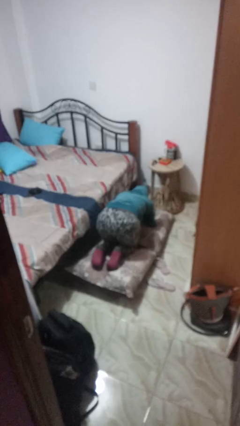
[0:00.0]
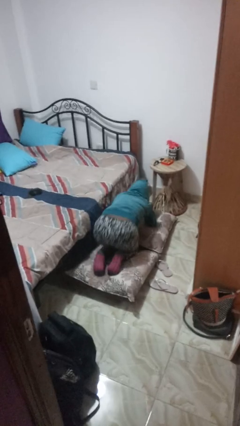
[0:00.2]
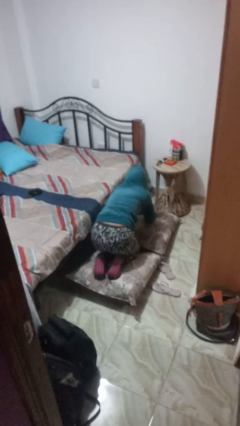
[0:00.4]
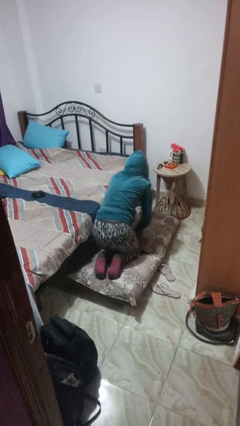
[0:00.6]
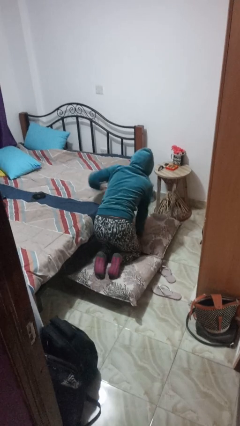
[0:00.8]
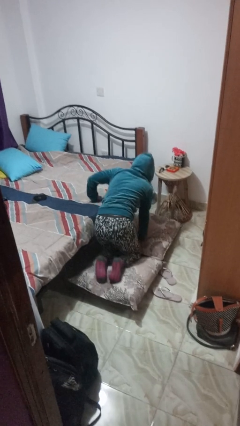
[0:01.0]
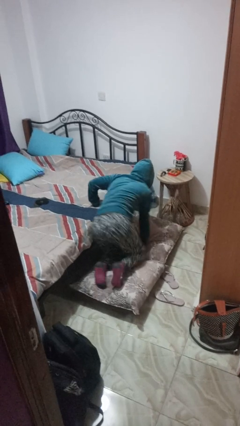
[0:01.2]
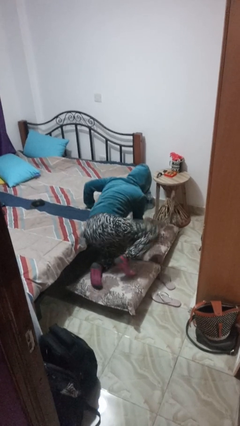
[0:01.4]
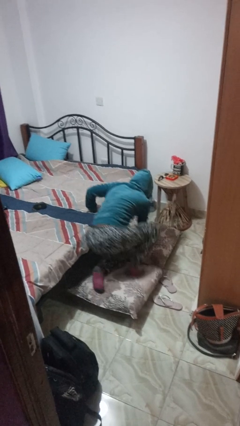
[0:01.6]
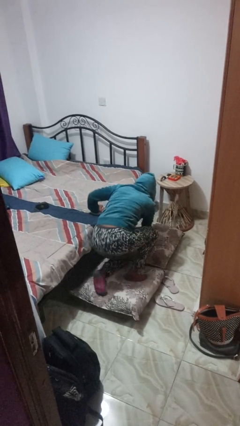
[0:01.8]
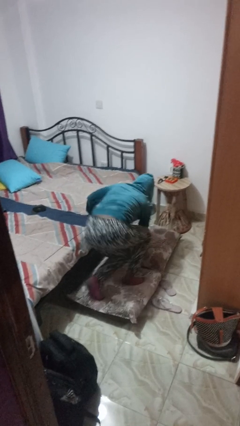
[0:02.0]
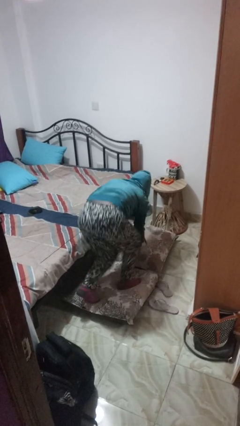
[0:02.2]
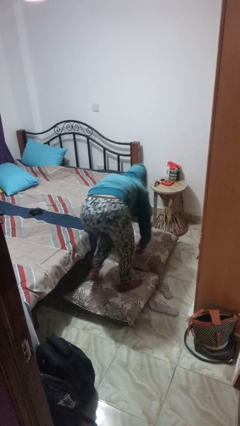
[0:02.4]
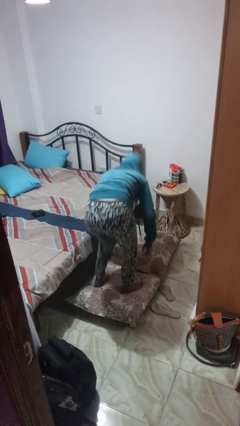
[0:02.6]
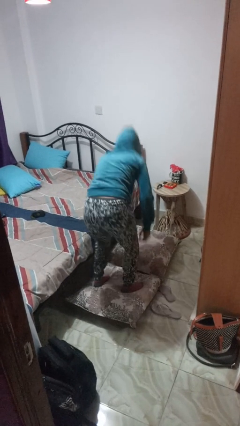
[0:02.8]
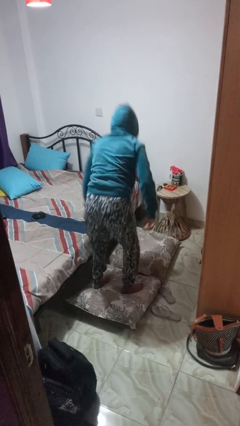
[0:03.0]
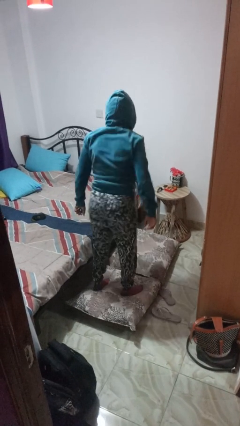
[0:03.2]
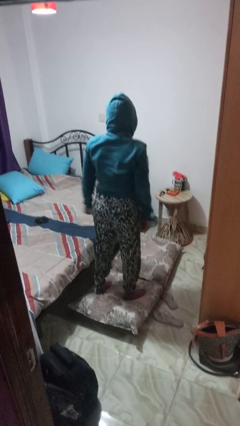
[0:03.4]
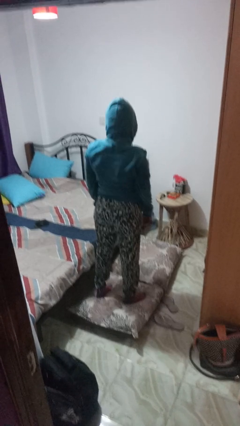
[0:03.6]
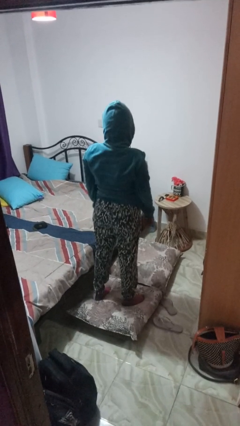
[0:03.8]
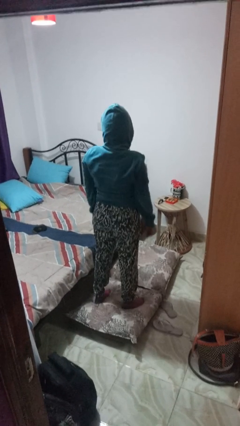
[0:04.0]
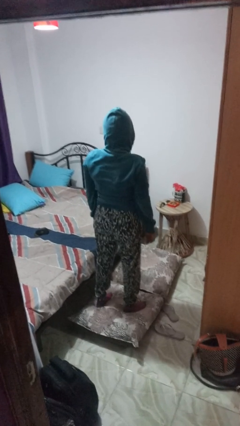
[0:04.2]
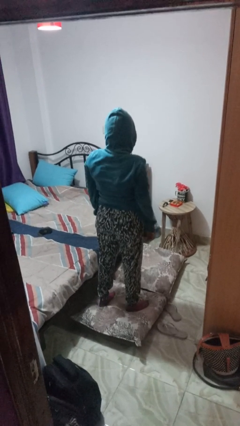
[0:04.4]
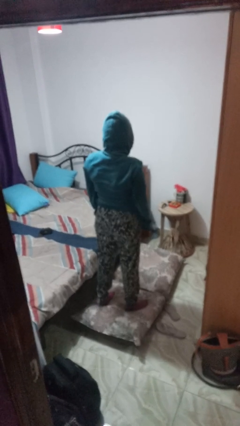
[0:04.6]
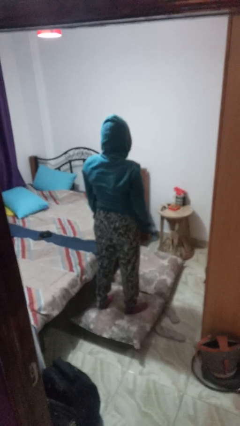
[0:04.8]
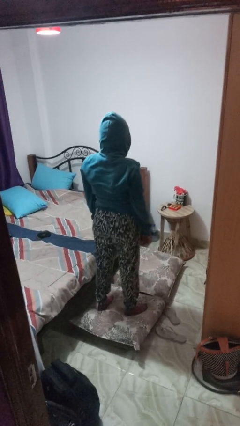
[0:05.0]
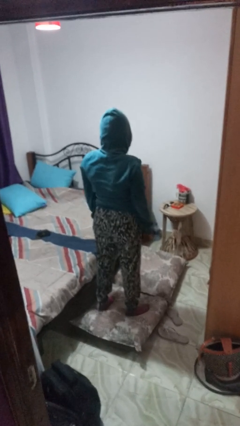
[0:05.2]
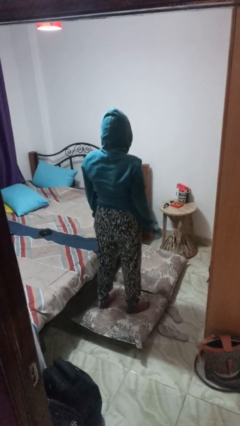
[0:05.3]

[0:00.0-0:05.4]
person stands up from floor

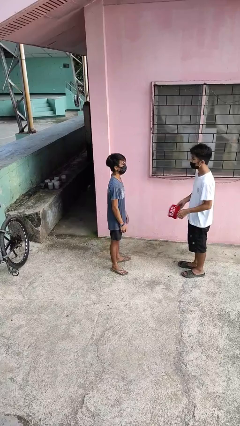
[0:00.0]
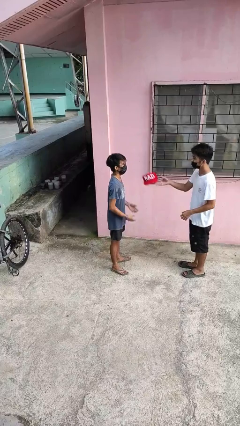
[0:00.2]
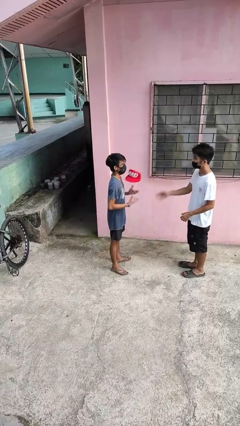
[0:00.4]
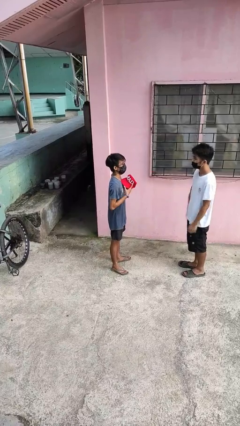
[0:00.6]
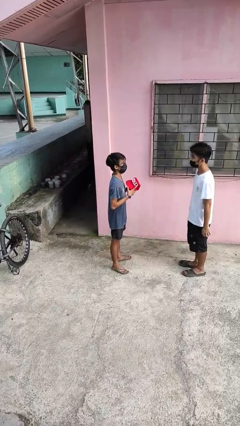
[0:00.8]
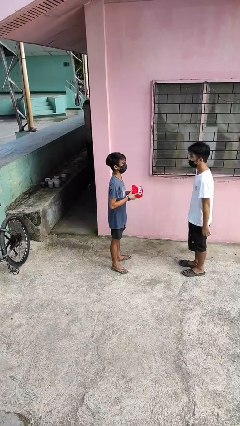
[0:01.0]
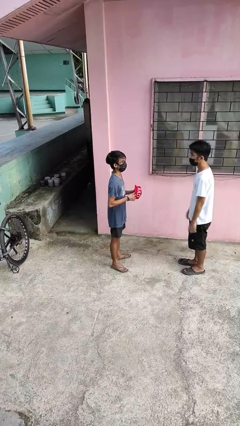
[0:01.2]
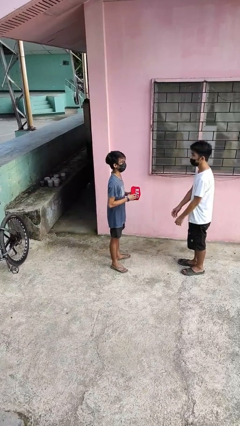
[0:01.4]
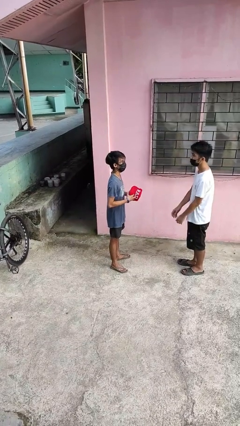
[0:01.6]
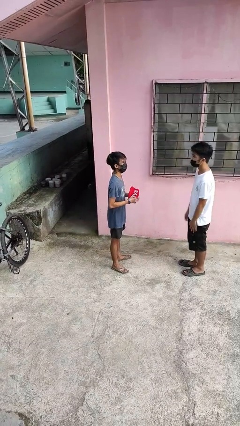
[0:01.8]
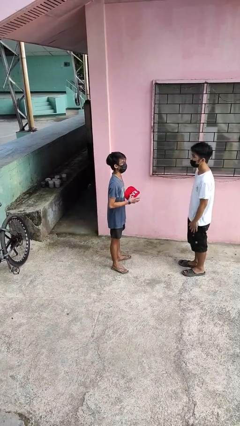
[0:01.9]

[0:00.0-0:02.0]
person catches object from person

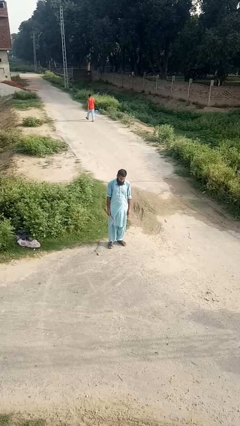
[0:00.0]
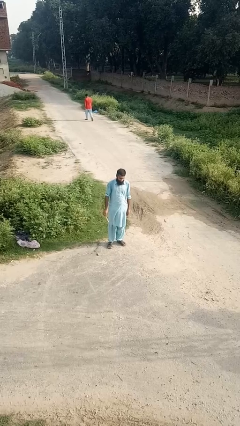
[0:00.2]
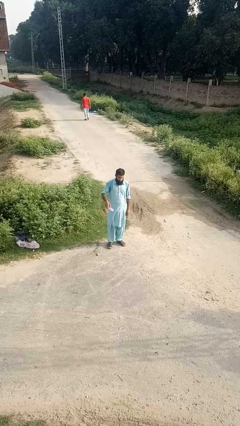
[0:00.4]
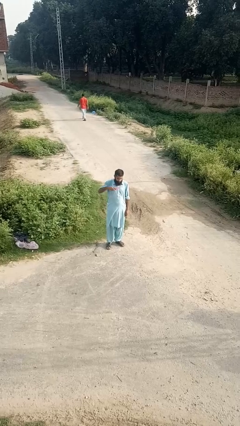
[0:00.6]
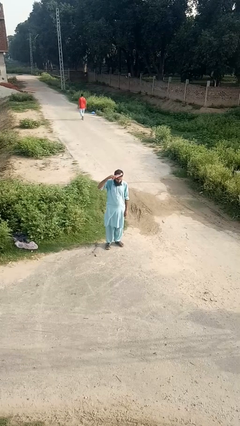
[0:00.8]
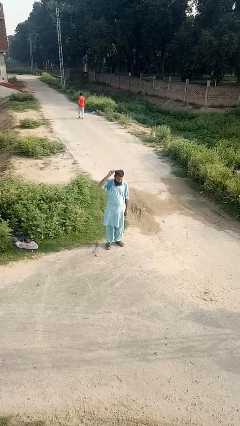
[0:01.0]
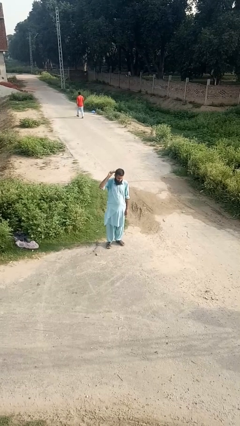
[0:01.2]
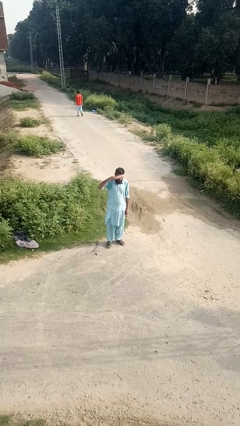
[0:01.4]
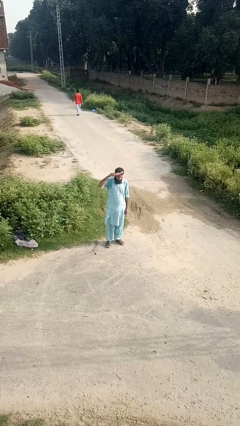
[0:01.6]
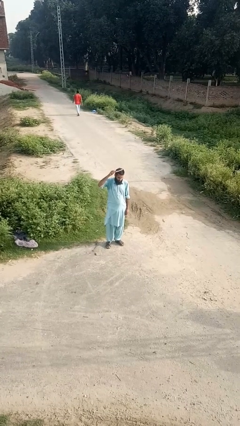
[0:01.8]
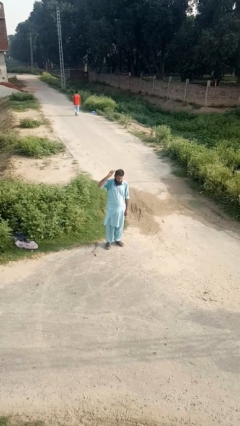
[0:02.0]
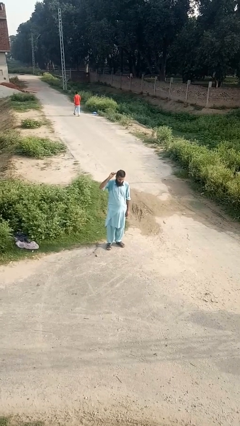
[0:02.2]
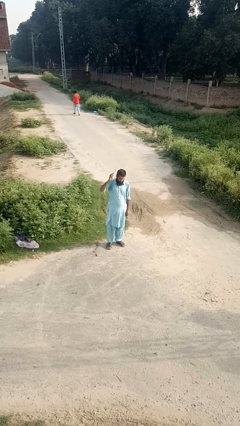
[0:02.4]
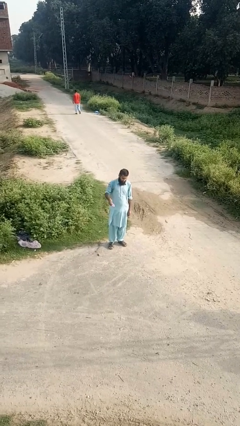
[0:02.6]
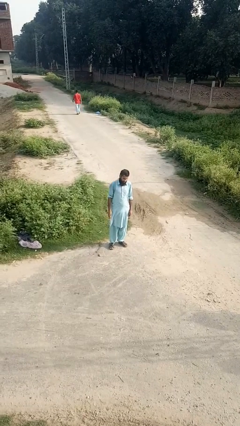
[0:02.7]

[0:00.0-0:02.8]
person brushes hair

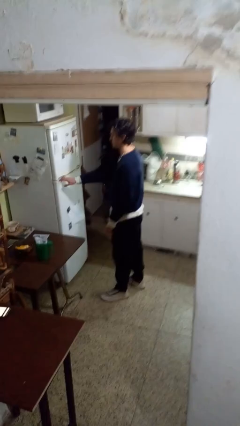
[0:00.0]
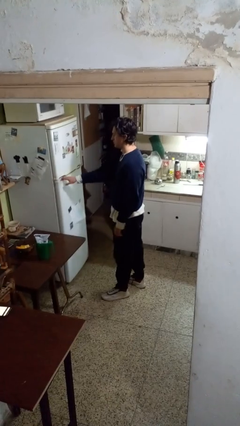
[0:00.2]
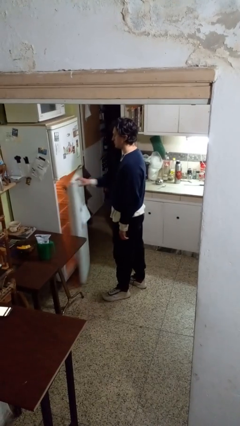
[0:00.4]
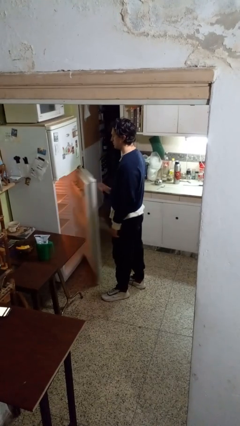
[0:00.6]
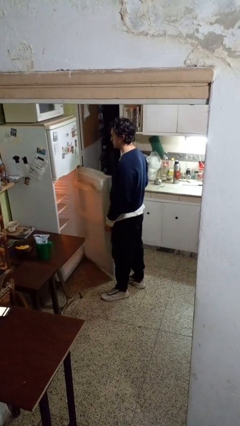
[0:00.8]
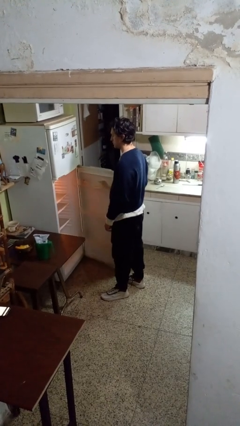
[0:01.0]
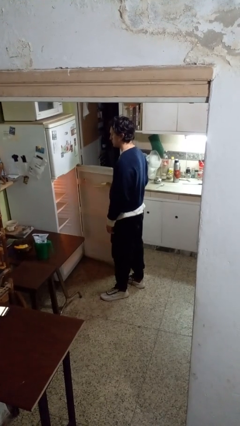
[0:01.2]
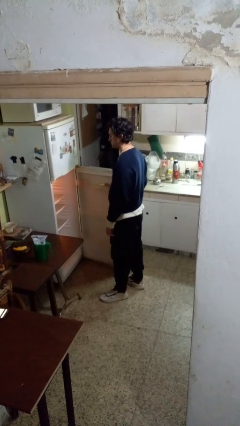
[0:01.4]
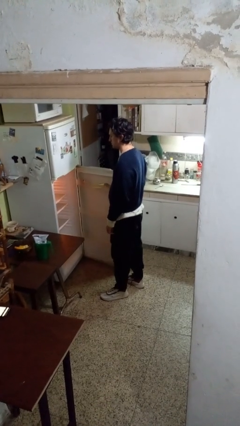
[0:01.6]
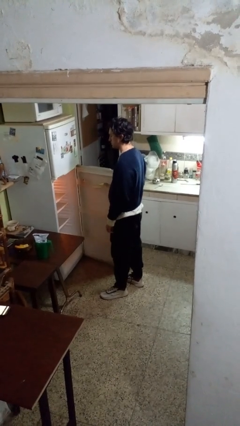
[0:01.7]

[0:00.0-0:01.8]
person opens refrigerator

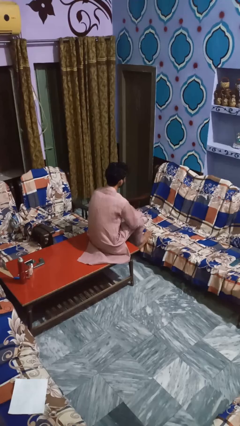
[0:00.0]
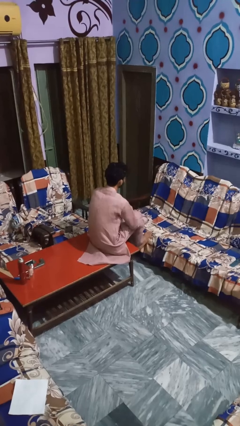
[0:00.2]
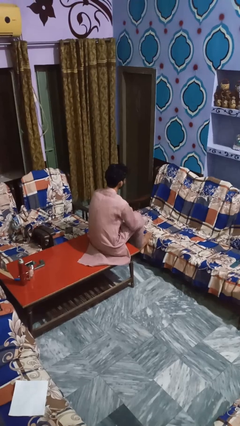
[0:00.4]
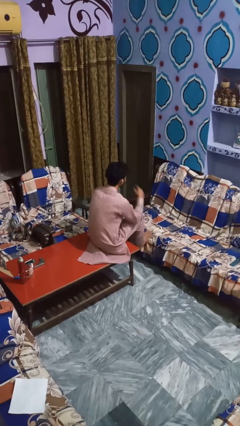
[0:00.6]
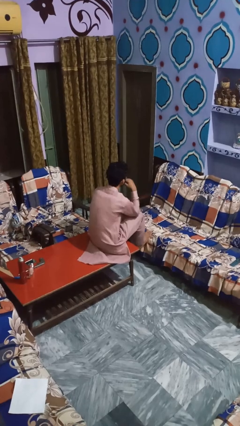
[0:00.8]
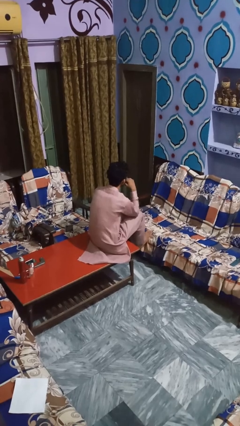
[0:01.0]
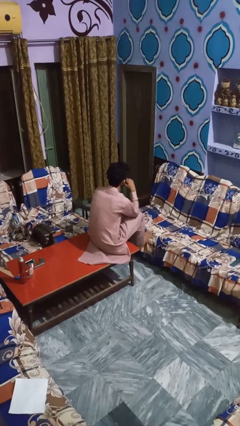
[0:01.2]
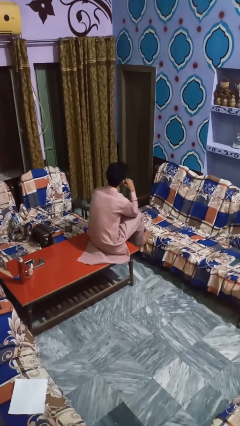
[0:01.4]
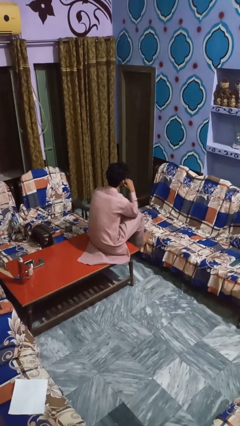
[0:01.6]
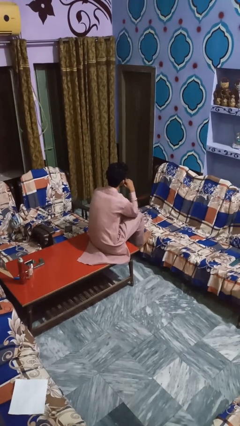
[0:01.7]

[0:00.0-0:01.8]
person licks fingers

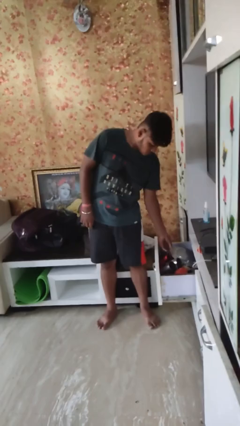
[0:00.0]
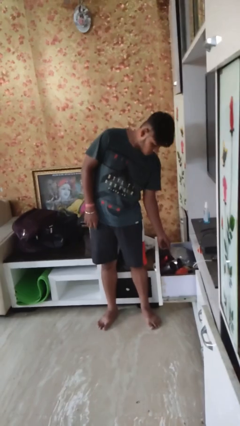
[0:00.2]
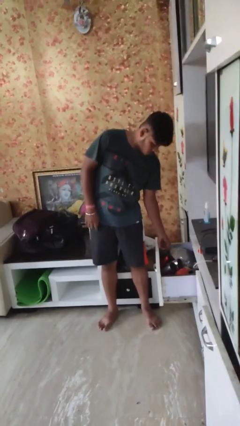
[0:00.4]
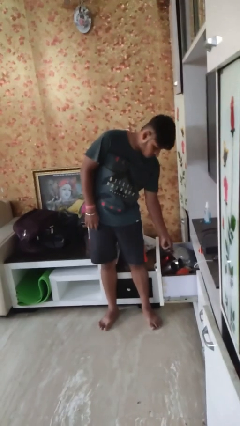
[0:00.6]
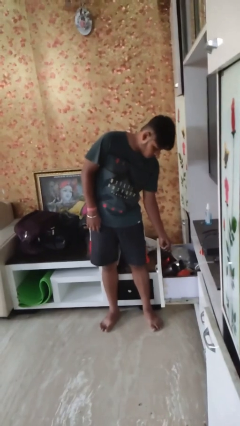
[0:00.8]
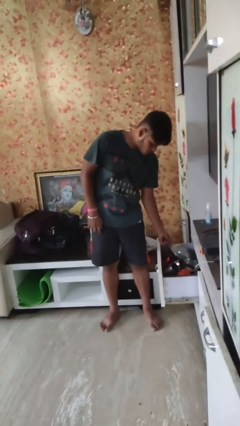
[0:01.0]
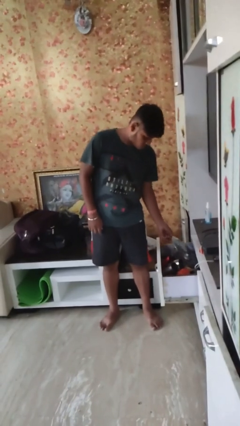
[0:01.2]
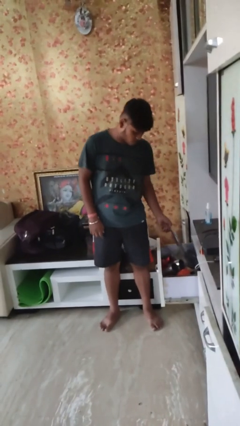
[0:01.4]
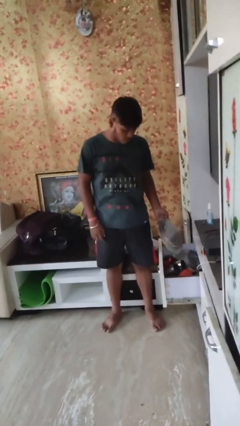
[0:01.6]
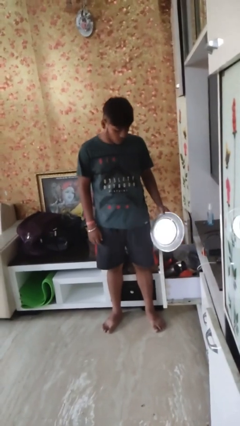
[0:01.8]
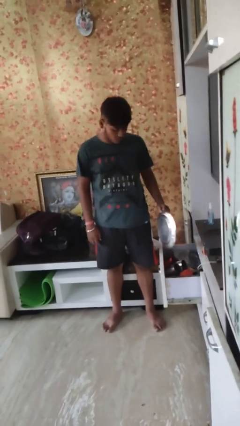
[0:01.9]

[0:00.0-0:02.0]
person takes object from kitchen drawer

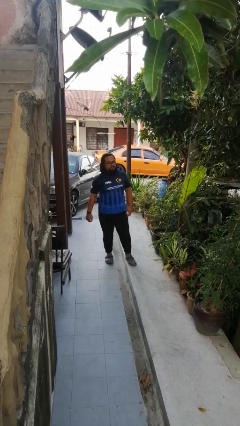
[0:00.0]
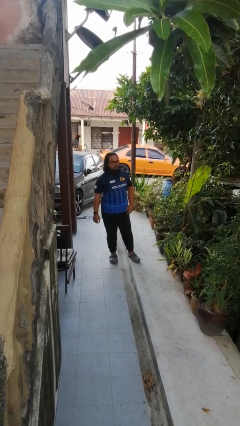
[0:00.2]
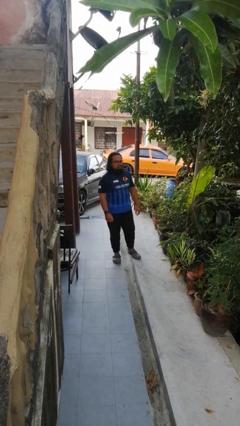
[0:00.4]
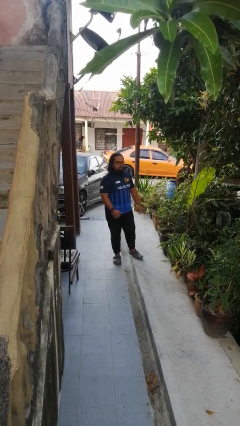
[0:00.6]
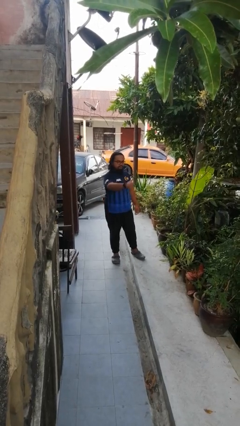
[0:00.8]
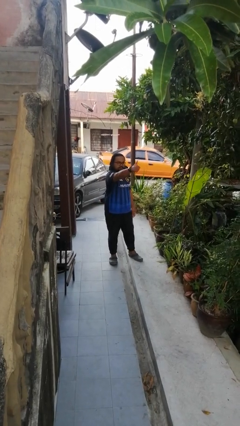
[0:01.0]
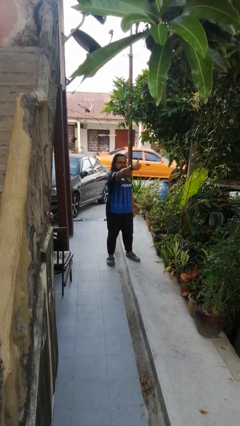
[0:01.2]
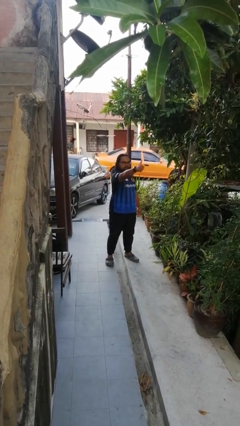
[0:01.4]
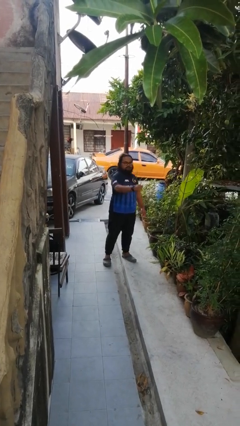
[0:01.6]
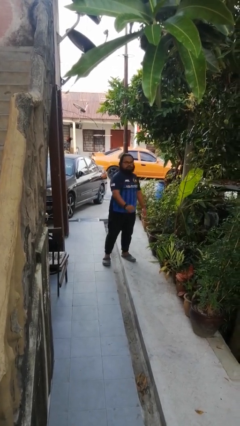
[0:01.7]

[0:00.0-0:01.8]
person gestures thumbs up
